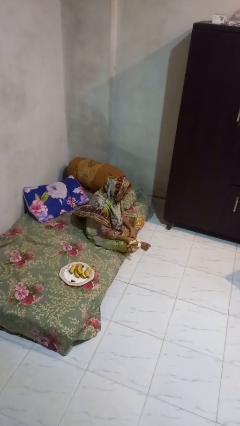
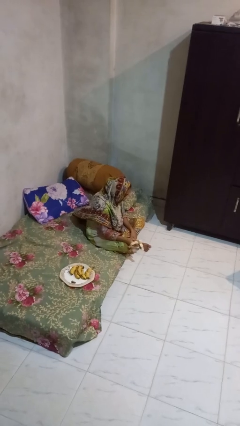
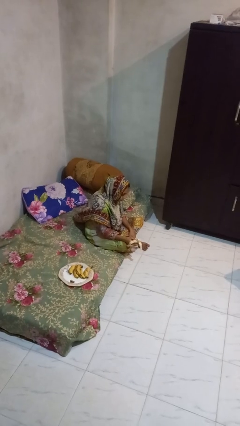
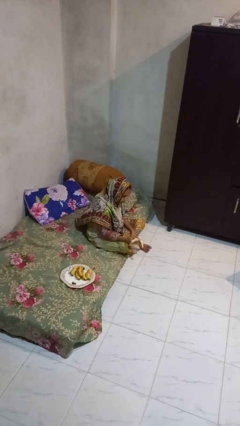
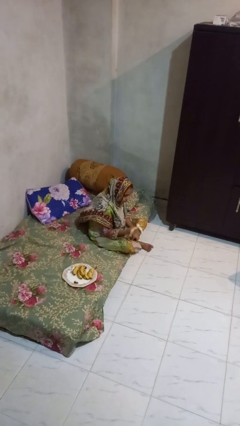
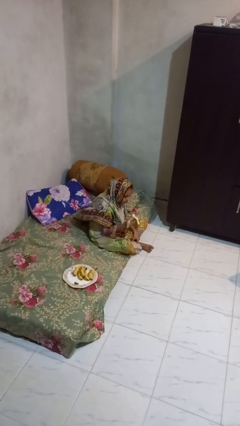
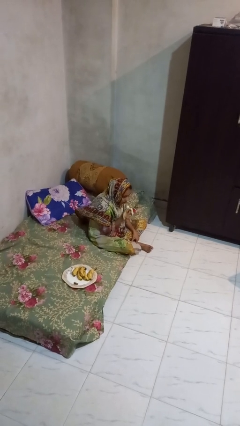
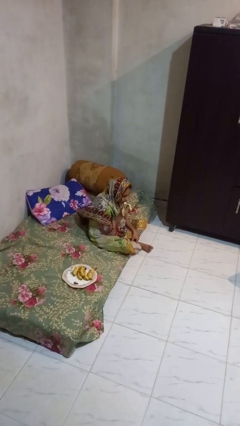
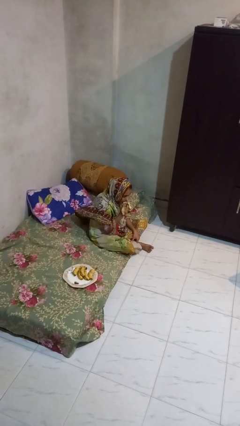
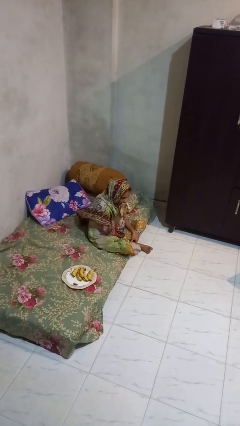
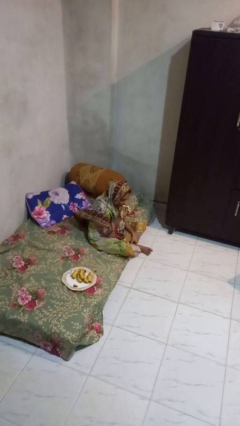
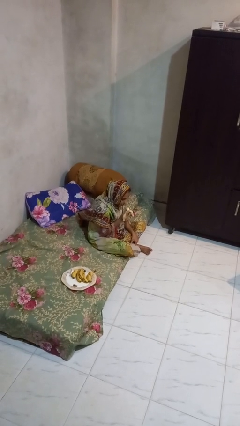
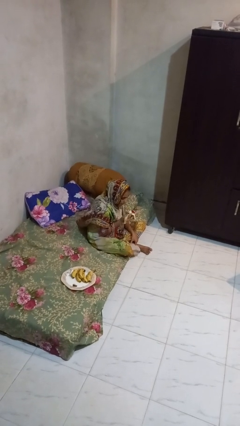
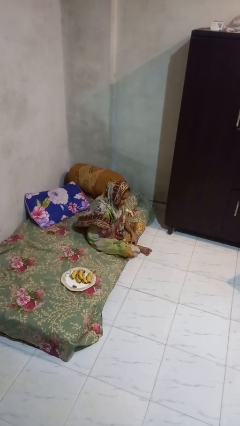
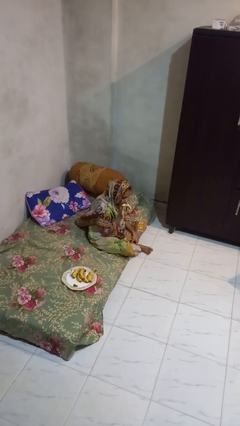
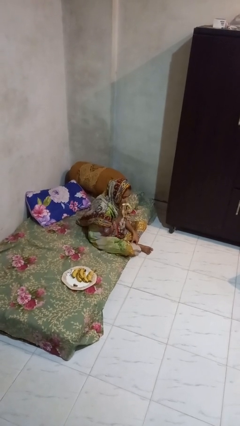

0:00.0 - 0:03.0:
person eats banana

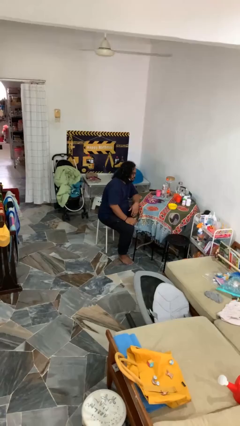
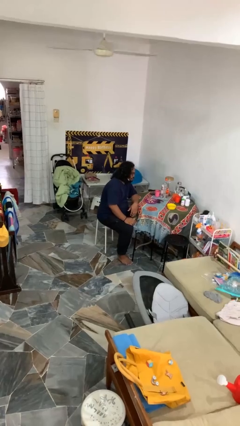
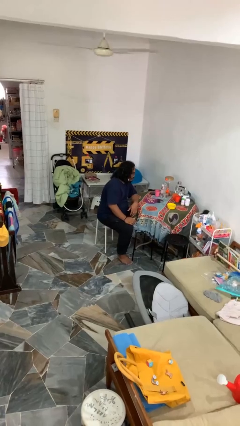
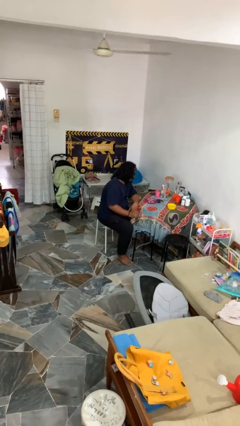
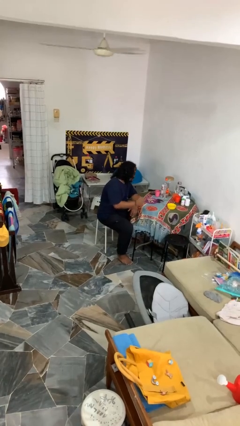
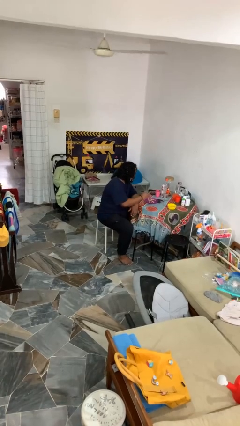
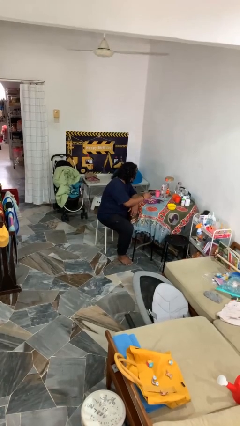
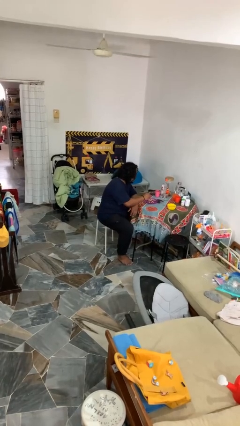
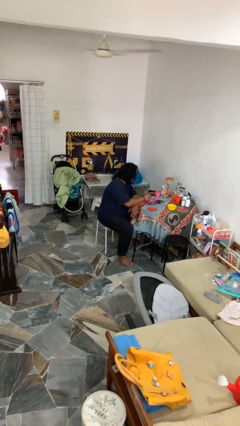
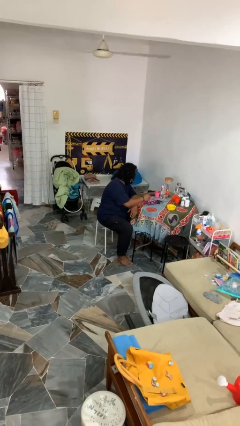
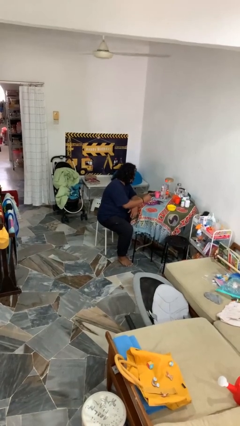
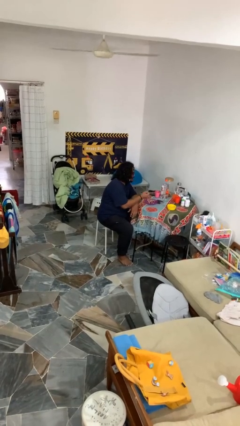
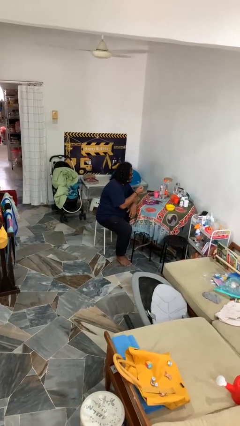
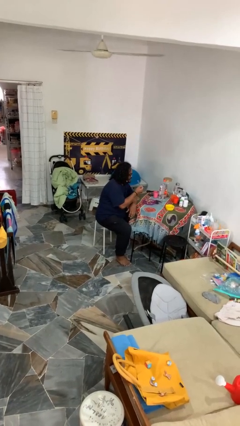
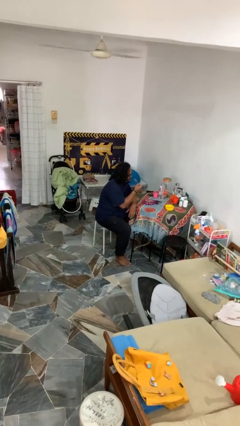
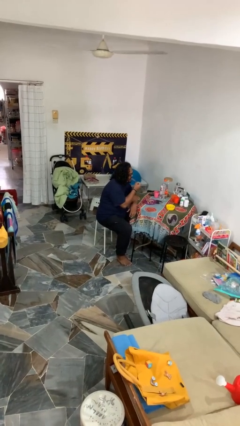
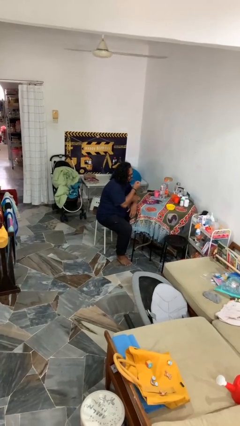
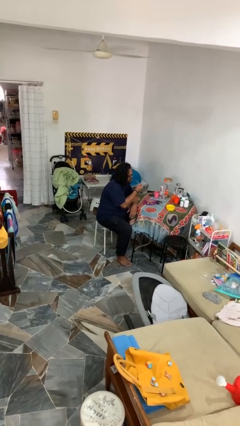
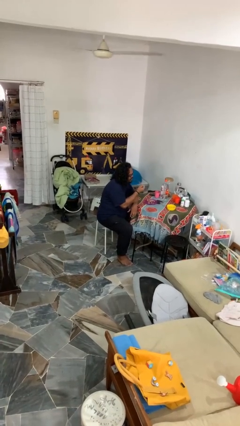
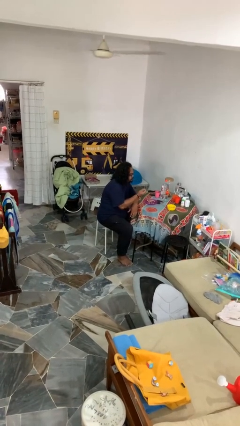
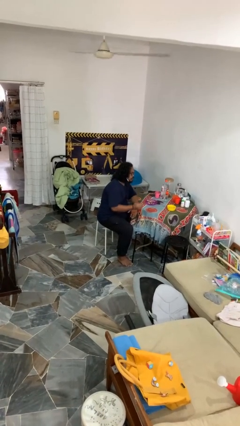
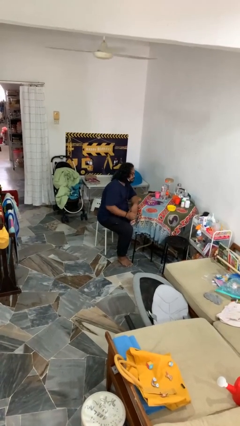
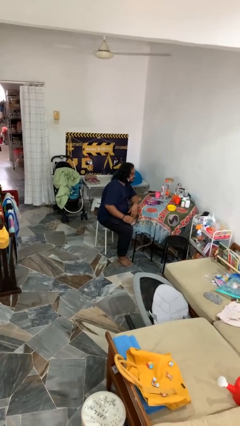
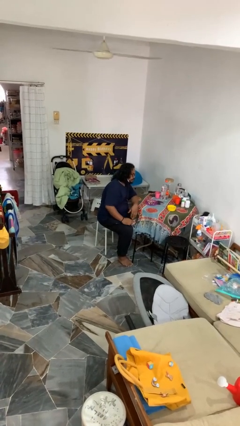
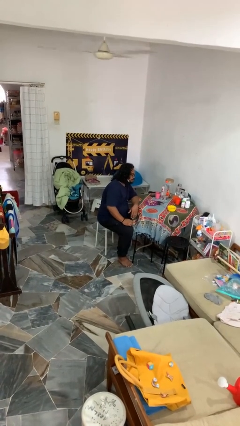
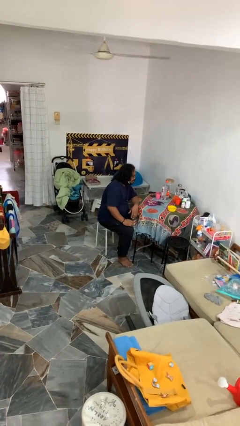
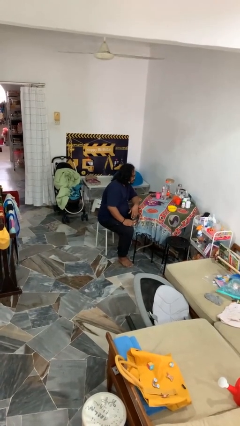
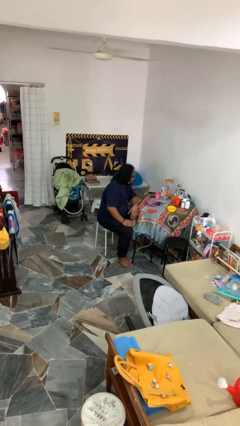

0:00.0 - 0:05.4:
person eats with utensil

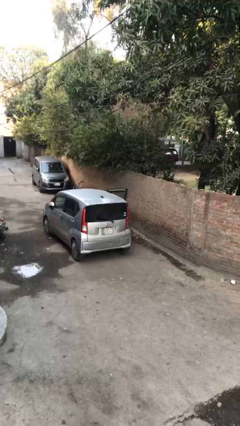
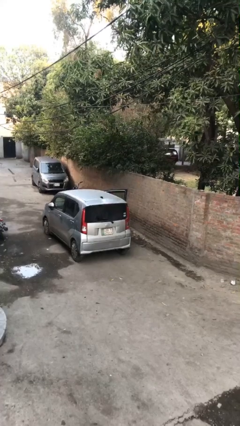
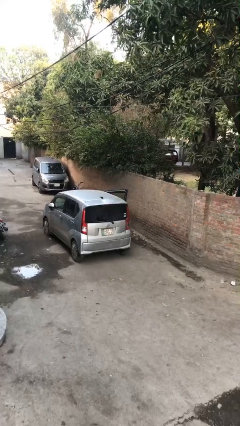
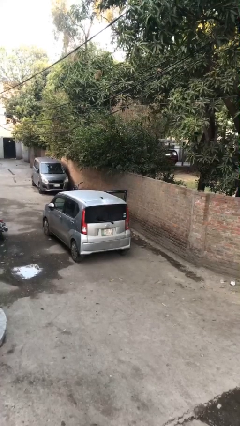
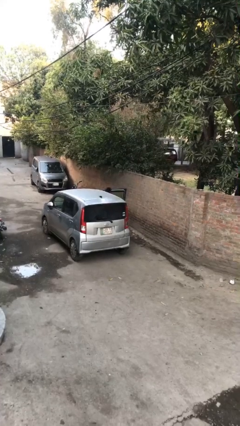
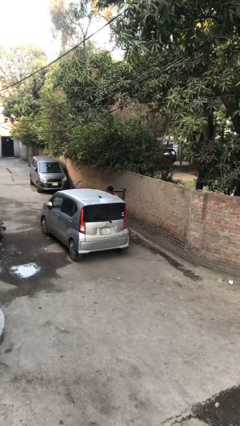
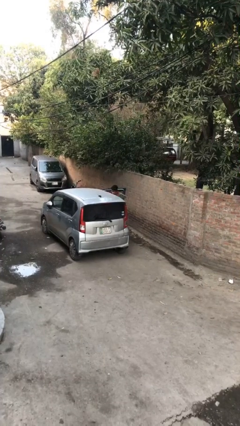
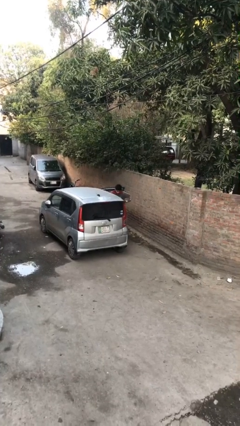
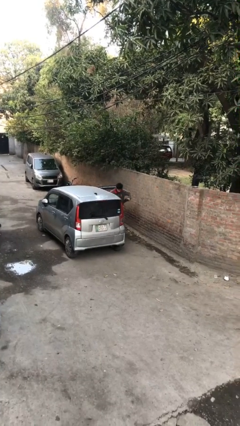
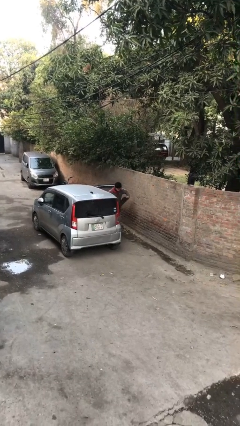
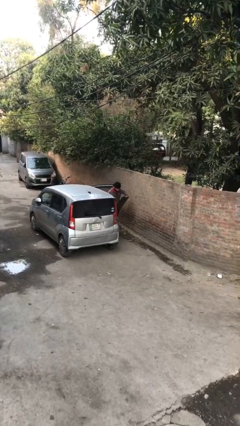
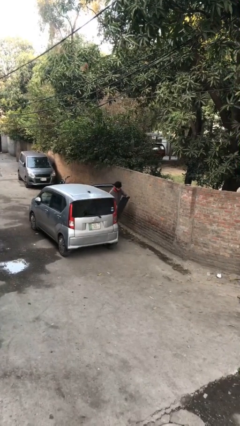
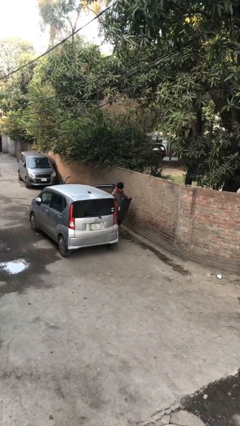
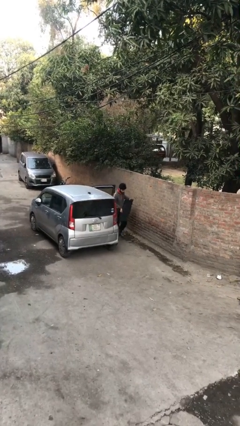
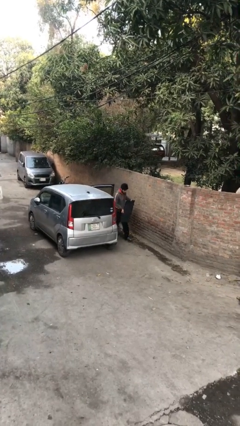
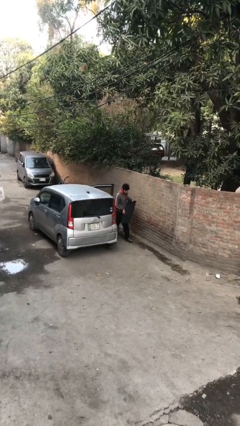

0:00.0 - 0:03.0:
person unloads car

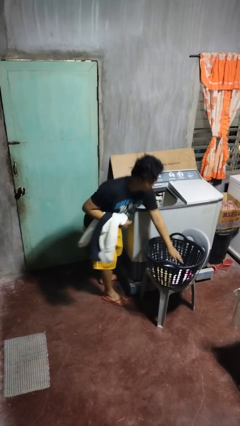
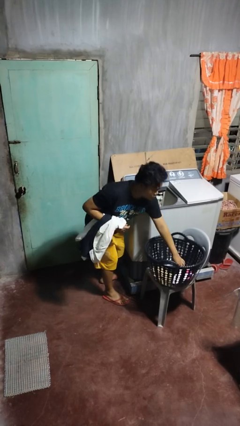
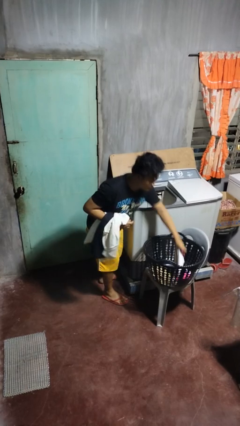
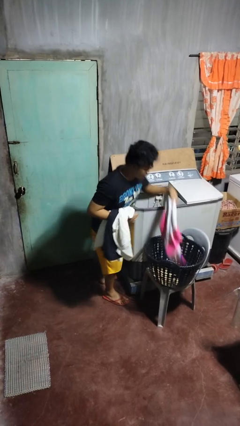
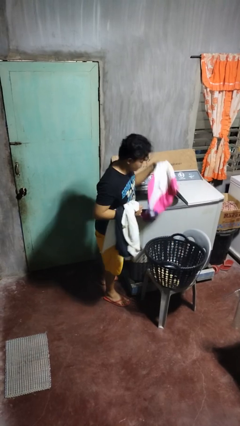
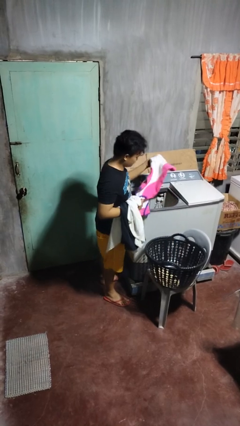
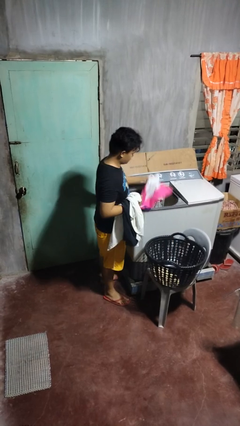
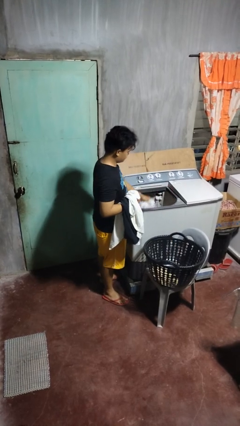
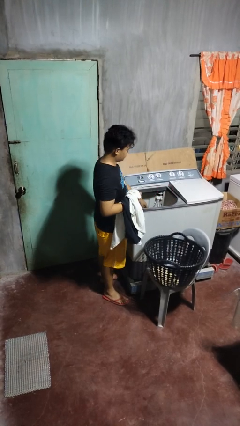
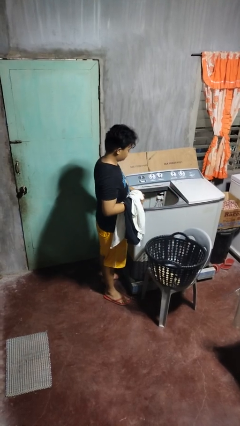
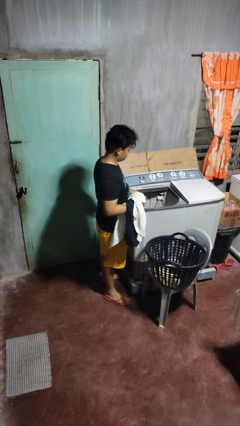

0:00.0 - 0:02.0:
person loads clotheswasher

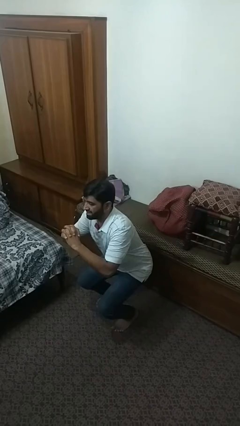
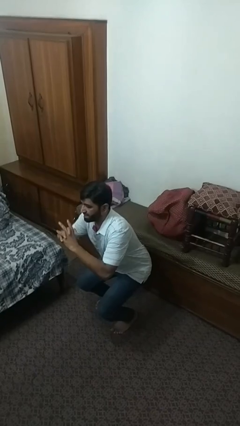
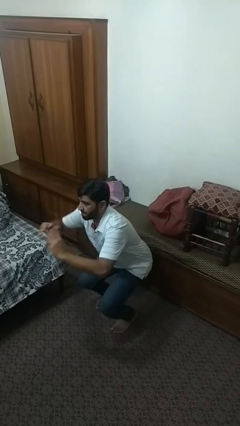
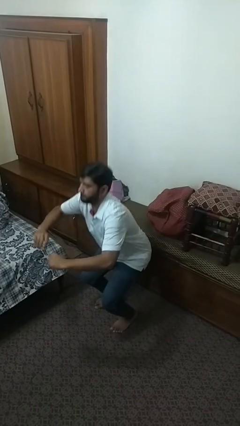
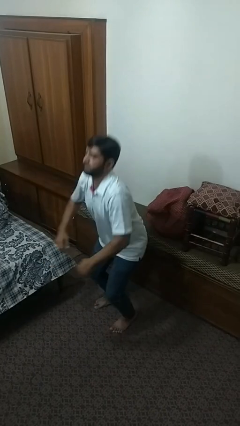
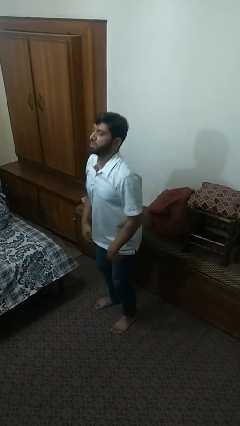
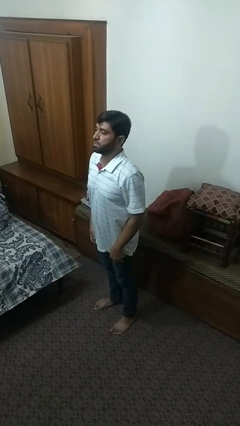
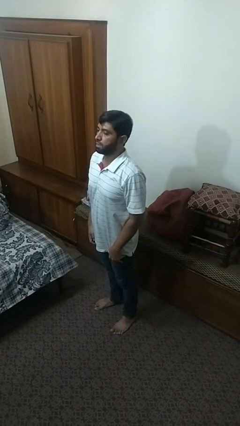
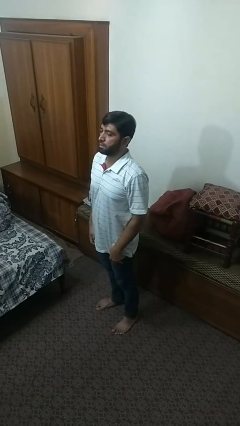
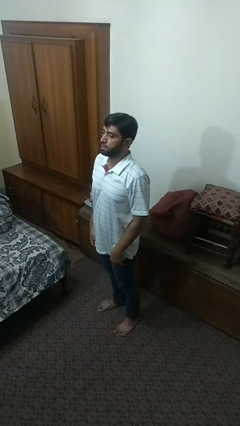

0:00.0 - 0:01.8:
person stands up

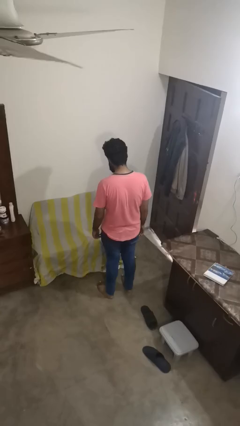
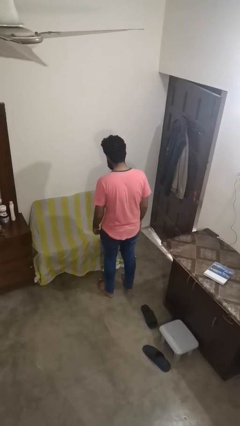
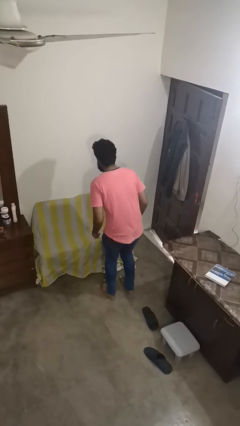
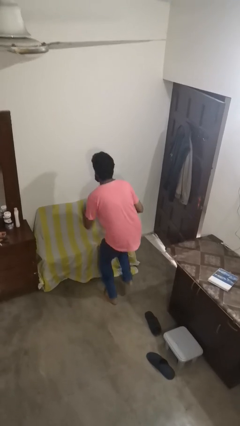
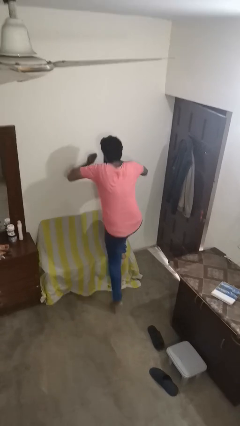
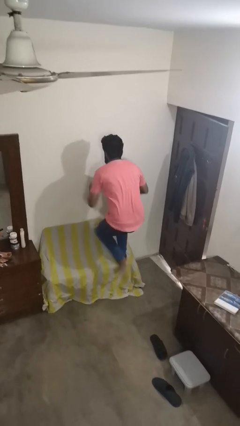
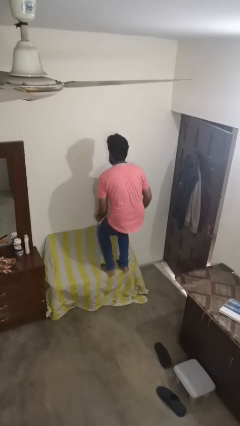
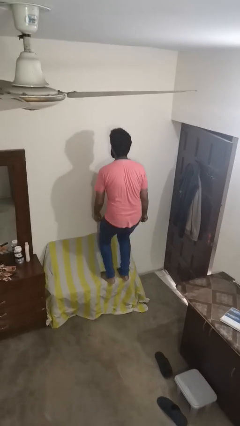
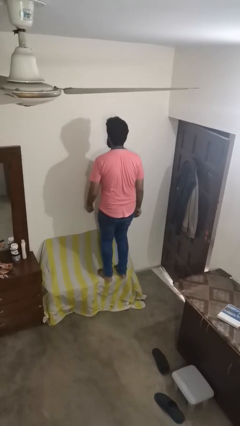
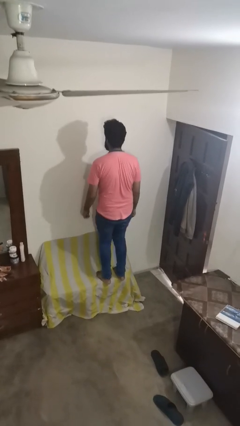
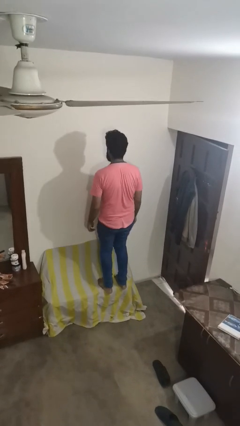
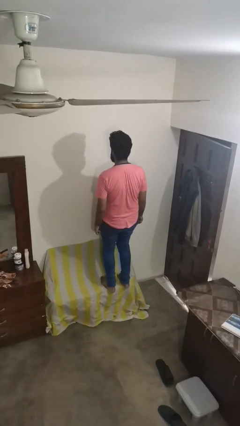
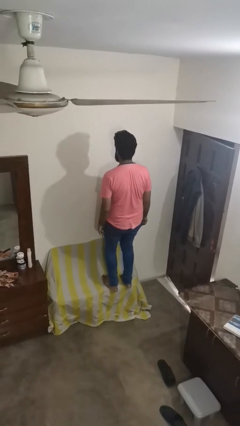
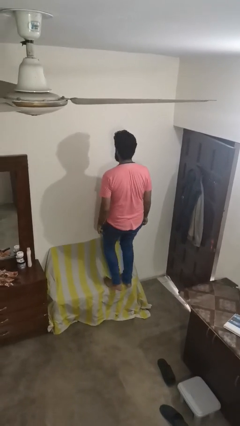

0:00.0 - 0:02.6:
person jumps on couch
